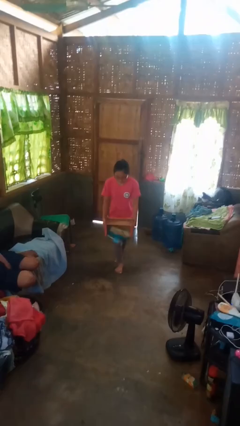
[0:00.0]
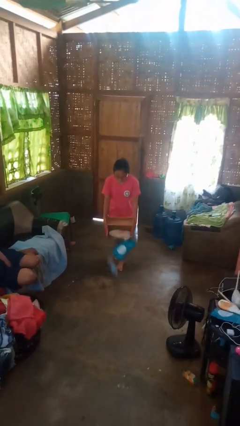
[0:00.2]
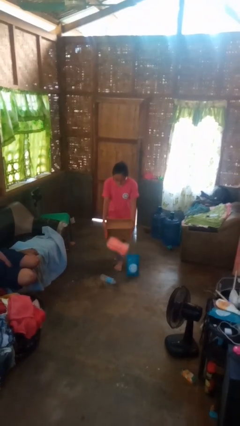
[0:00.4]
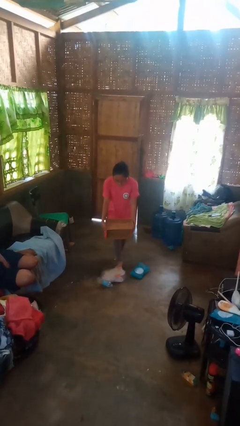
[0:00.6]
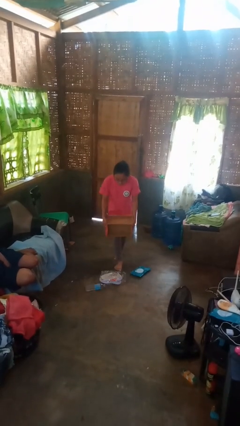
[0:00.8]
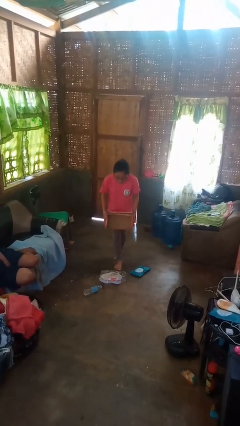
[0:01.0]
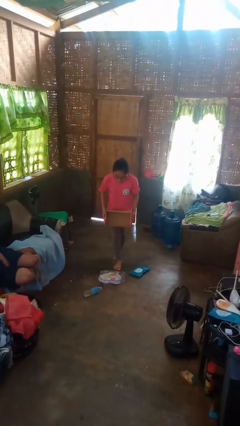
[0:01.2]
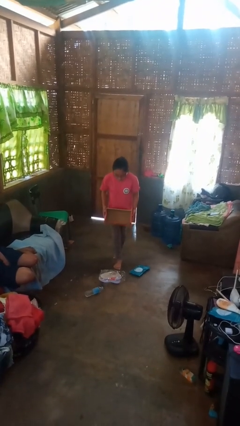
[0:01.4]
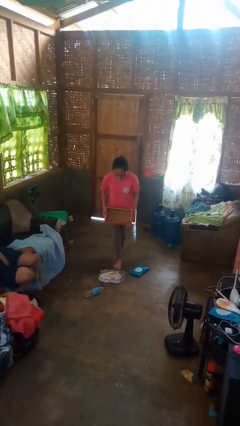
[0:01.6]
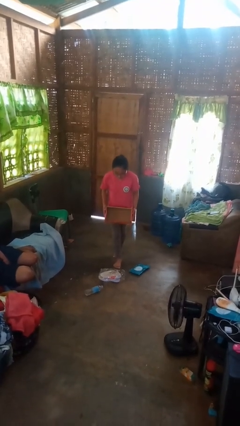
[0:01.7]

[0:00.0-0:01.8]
person unloads box onto floor

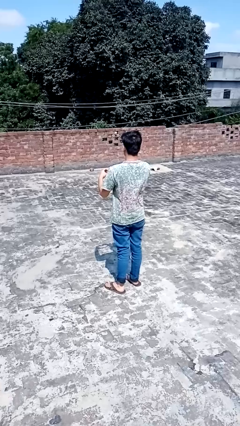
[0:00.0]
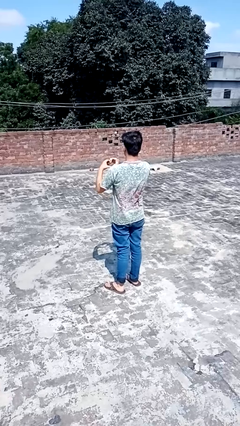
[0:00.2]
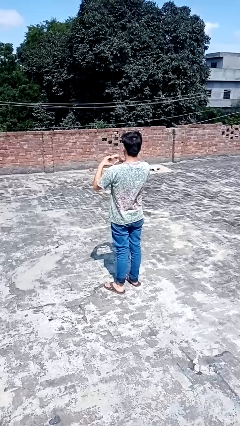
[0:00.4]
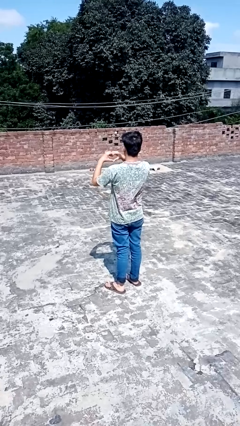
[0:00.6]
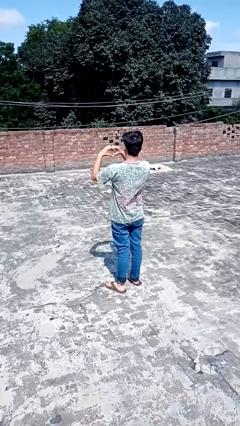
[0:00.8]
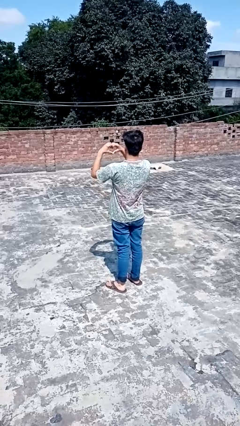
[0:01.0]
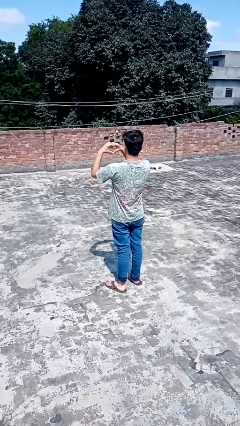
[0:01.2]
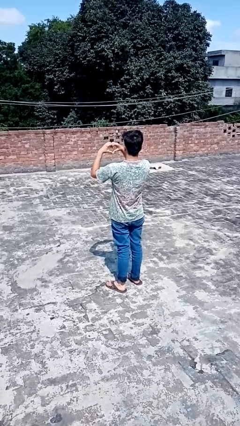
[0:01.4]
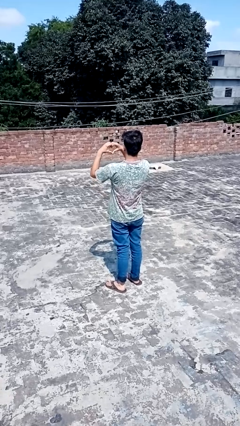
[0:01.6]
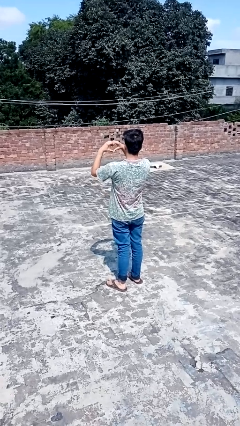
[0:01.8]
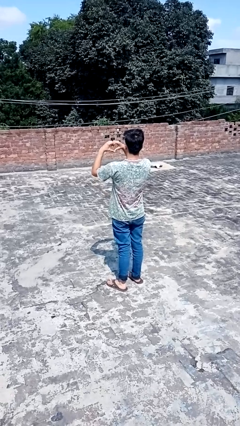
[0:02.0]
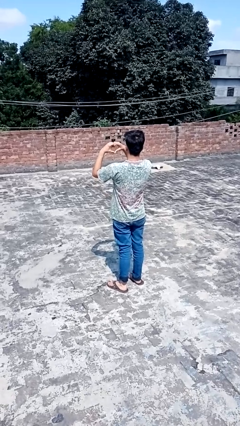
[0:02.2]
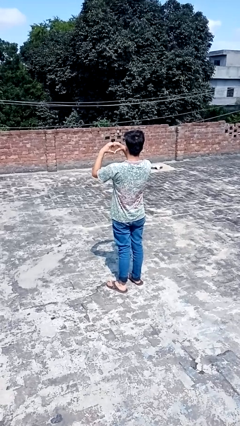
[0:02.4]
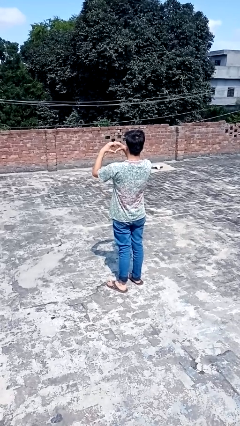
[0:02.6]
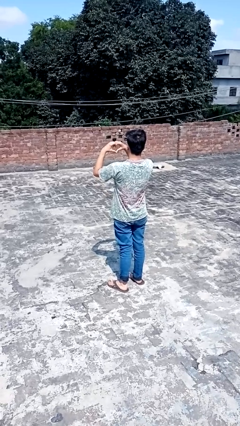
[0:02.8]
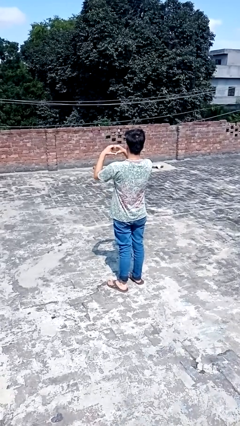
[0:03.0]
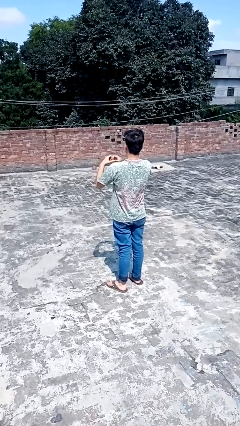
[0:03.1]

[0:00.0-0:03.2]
person gestures heart

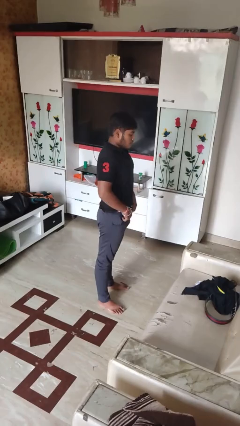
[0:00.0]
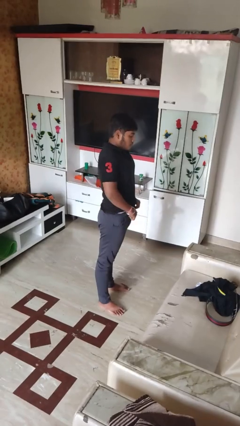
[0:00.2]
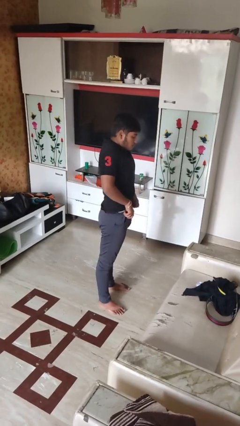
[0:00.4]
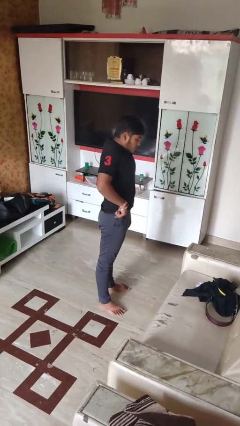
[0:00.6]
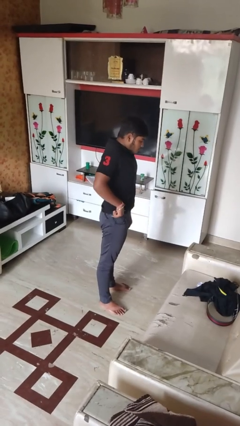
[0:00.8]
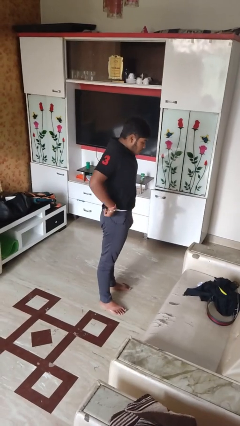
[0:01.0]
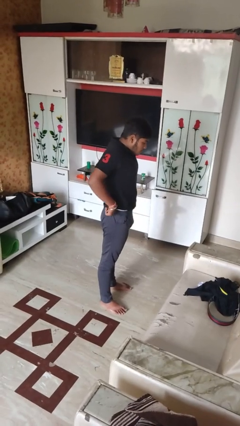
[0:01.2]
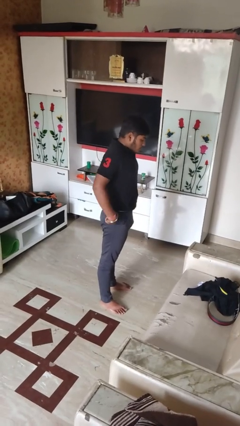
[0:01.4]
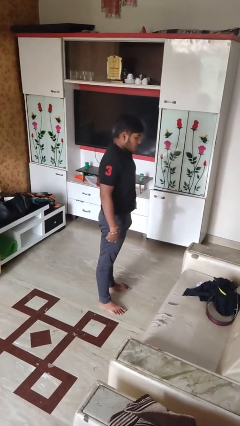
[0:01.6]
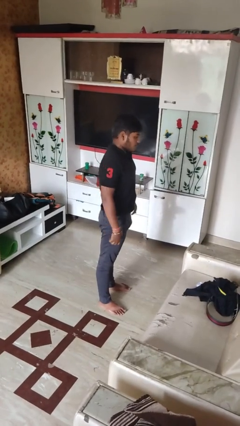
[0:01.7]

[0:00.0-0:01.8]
person hikes up pants

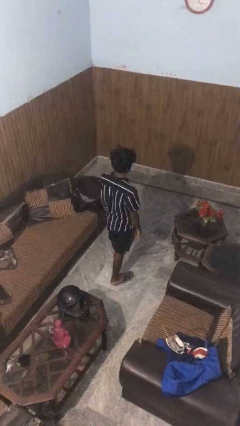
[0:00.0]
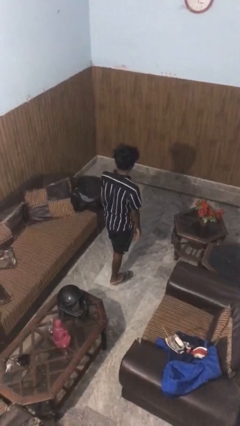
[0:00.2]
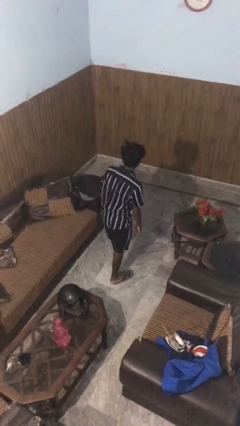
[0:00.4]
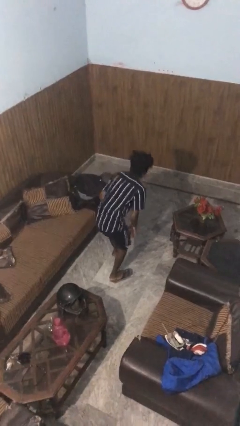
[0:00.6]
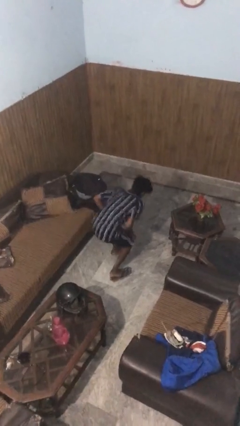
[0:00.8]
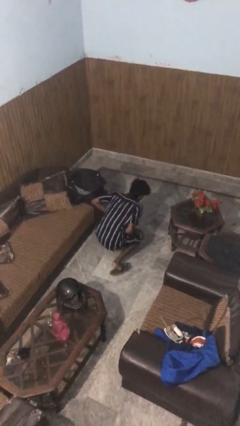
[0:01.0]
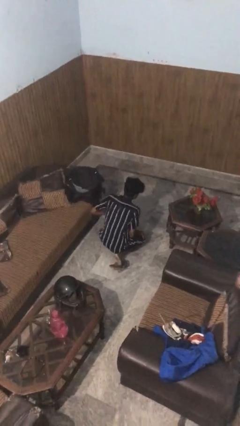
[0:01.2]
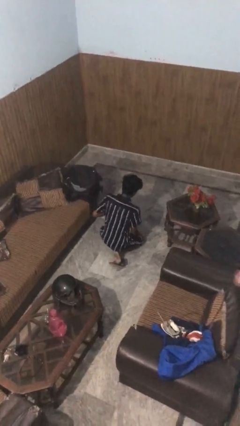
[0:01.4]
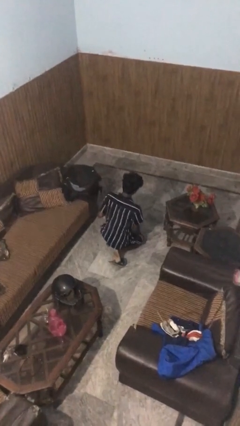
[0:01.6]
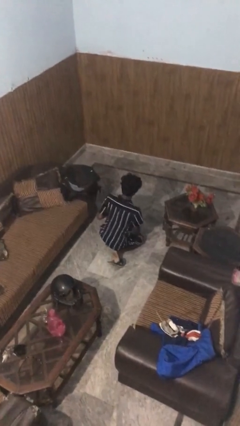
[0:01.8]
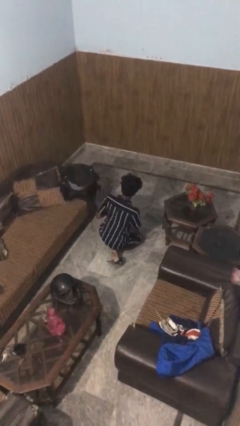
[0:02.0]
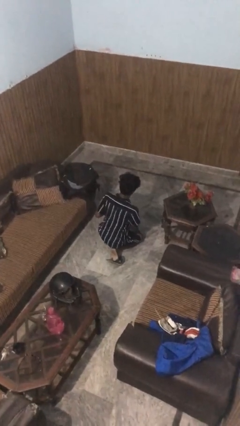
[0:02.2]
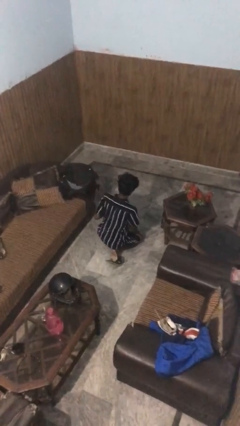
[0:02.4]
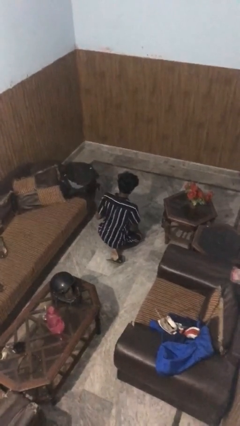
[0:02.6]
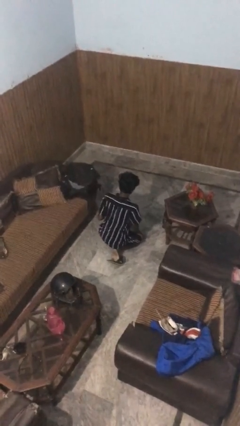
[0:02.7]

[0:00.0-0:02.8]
person kneels

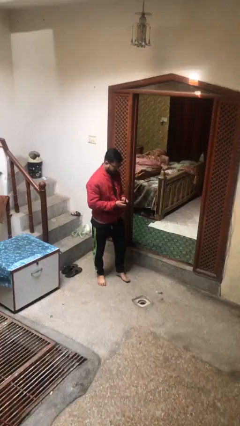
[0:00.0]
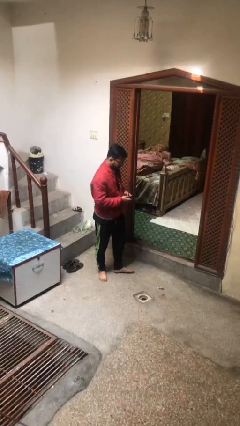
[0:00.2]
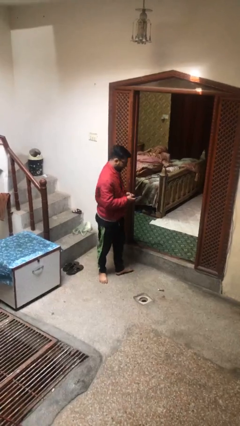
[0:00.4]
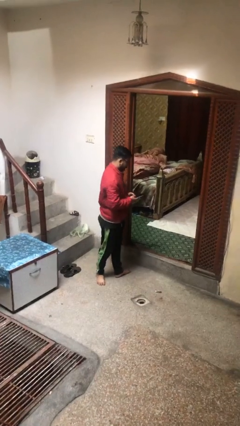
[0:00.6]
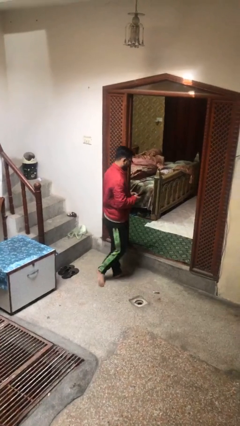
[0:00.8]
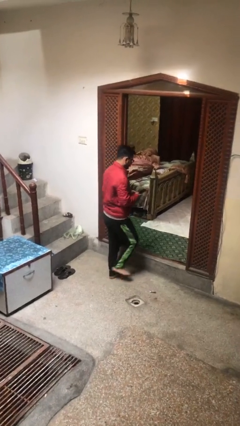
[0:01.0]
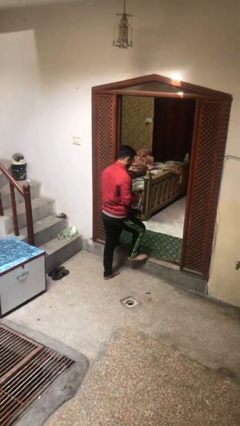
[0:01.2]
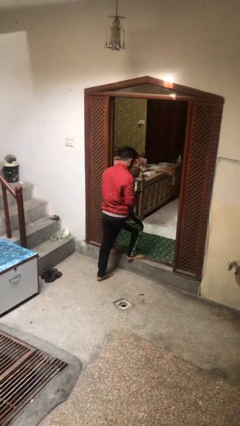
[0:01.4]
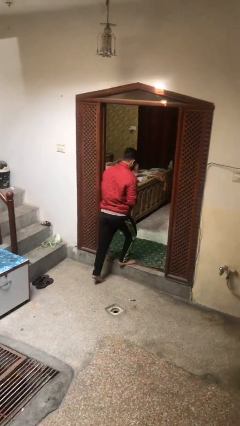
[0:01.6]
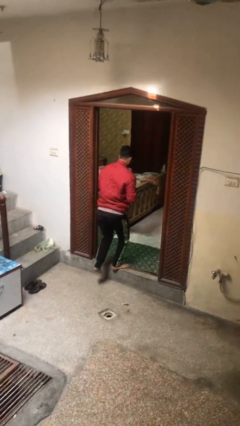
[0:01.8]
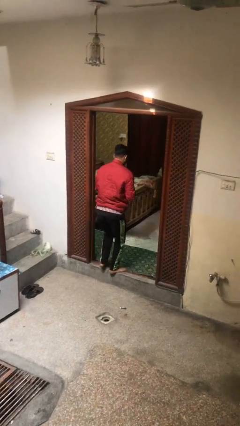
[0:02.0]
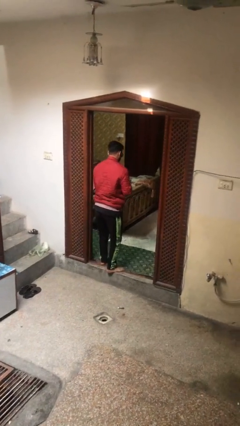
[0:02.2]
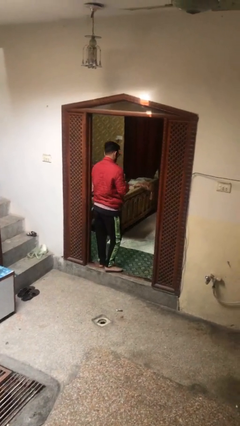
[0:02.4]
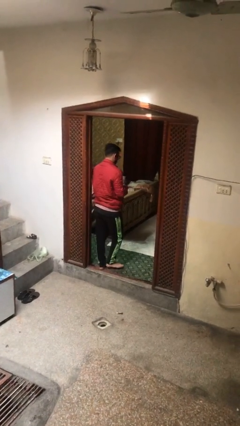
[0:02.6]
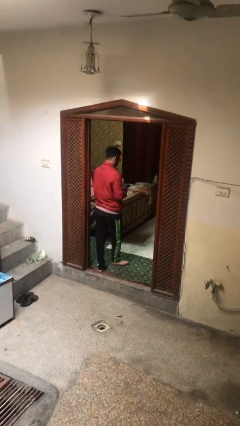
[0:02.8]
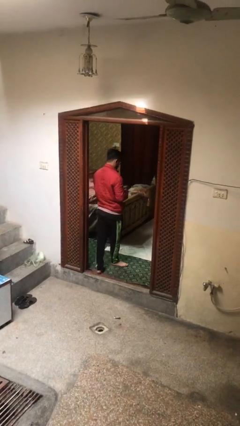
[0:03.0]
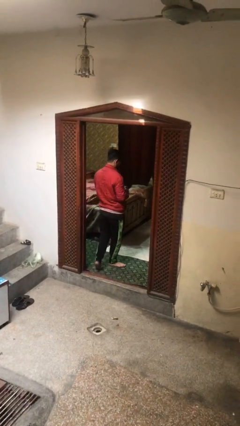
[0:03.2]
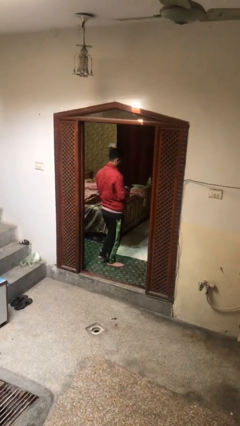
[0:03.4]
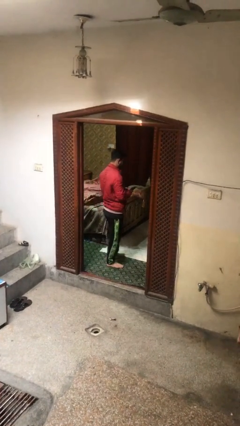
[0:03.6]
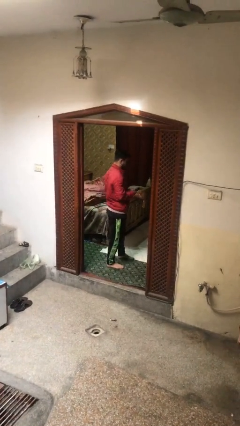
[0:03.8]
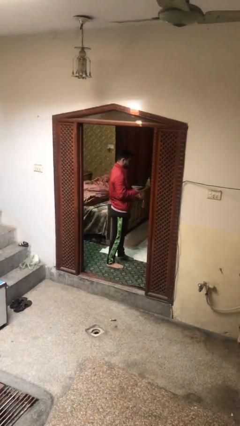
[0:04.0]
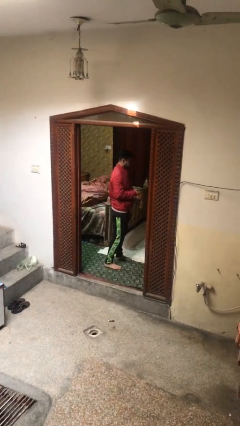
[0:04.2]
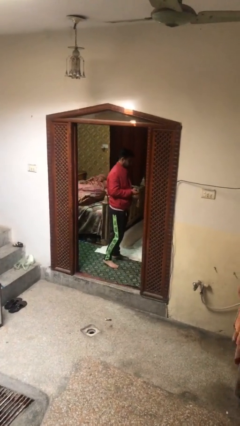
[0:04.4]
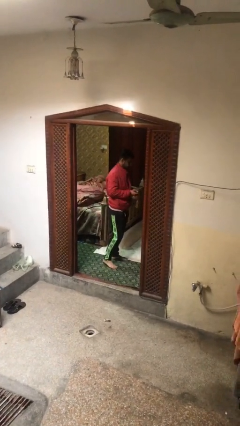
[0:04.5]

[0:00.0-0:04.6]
person exits scene through structure

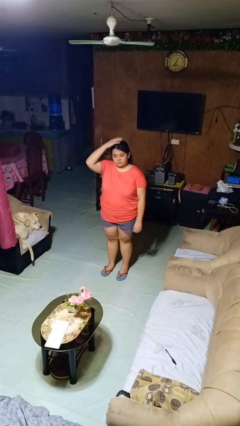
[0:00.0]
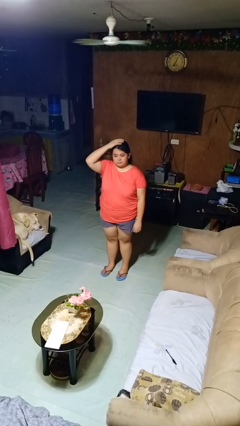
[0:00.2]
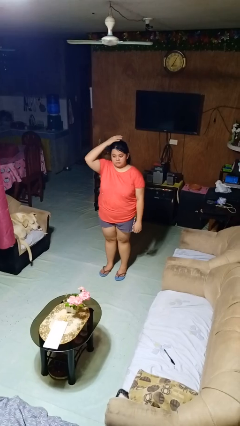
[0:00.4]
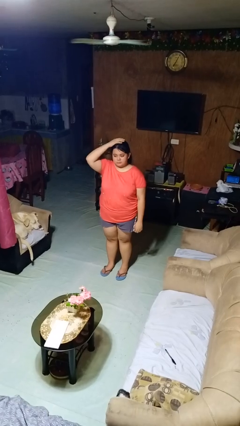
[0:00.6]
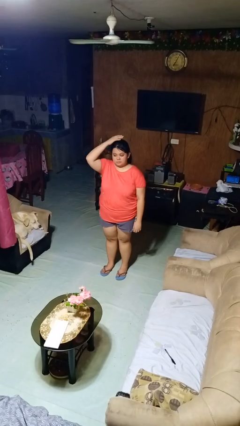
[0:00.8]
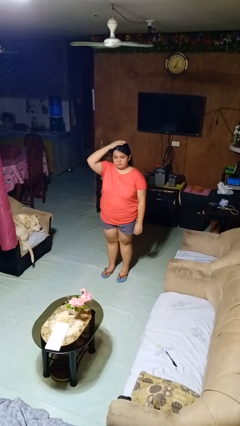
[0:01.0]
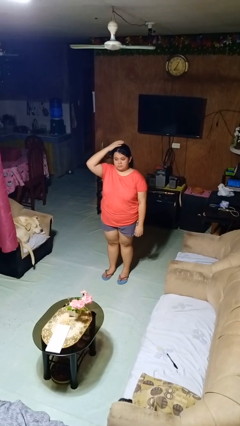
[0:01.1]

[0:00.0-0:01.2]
person pats head

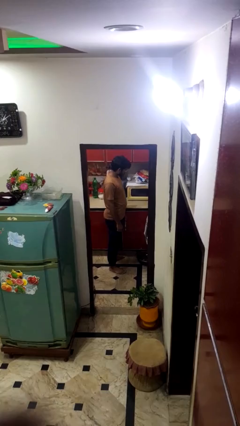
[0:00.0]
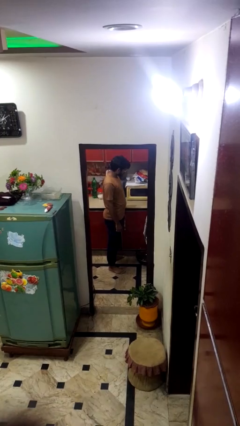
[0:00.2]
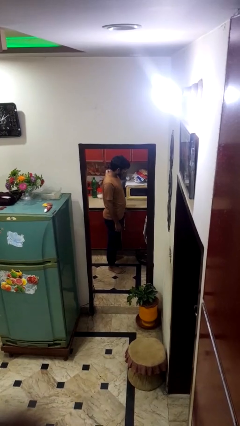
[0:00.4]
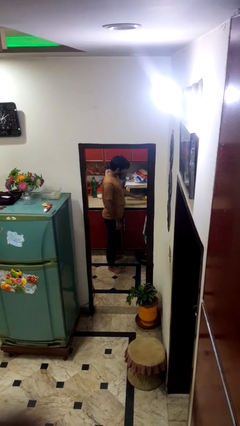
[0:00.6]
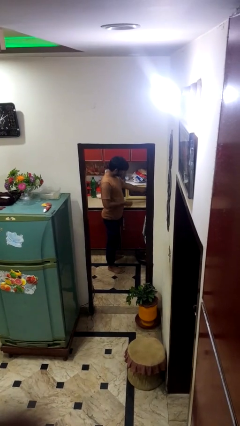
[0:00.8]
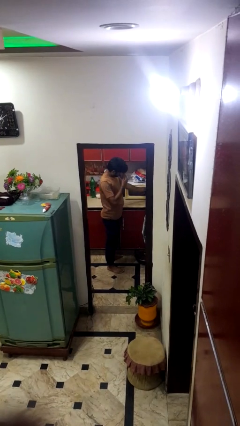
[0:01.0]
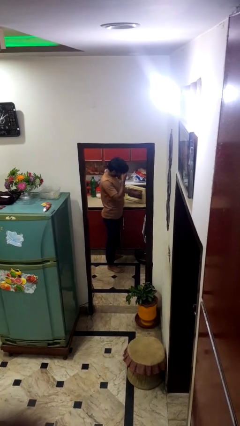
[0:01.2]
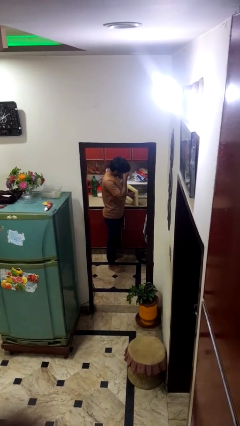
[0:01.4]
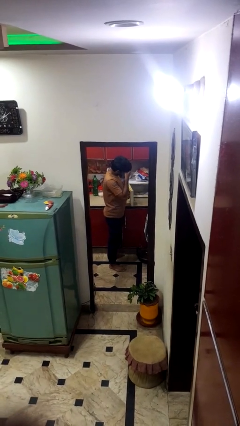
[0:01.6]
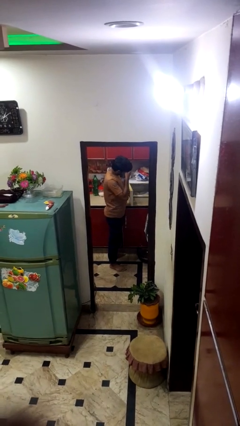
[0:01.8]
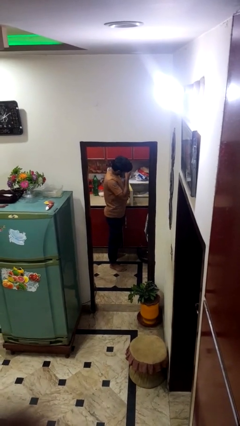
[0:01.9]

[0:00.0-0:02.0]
person opens microwave
